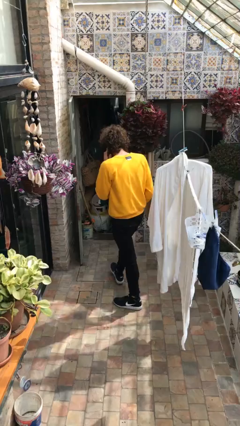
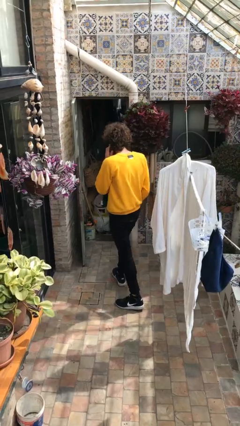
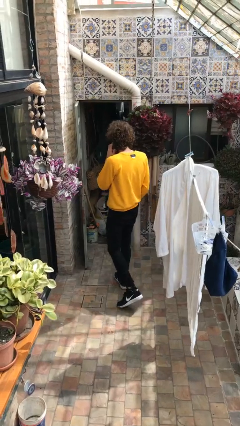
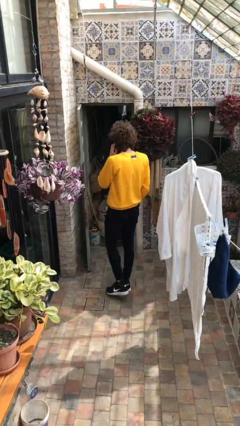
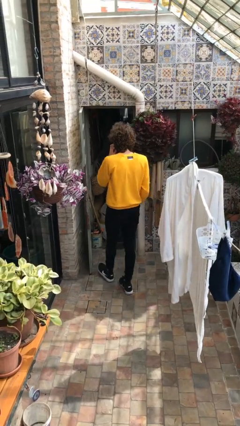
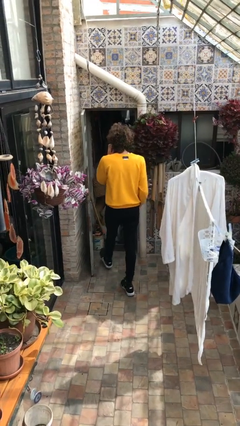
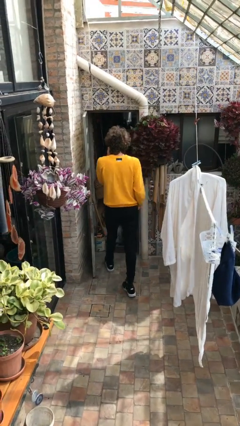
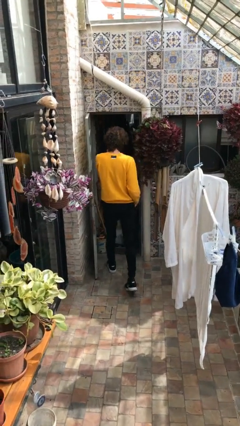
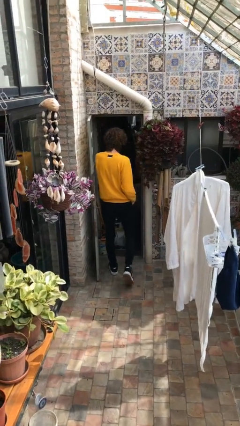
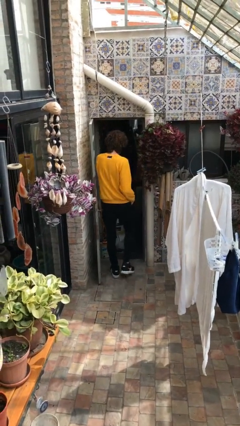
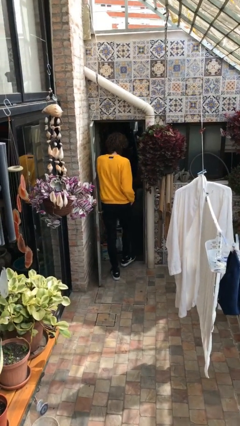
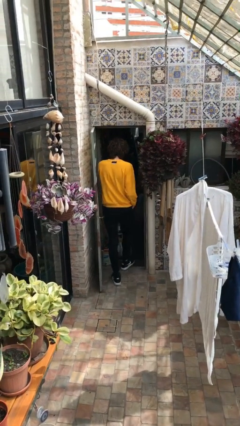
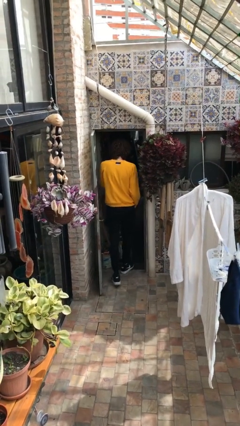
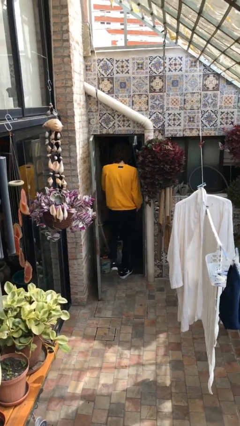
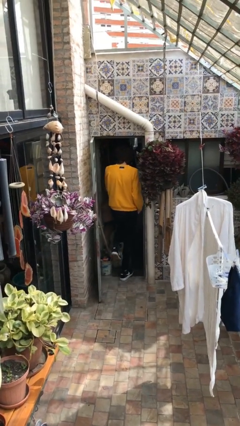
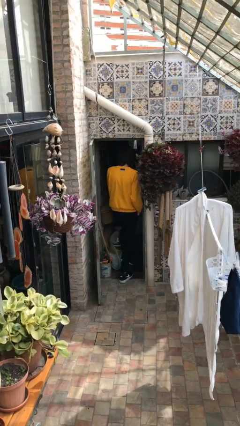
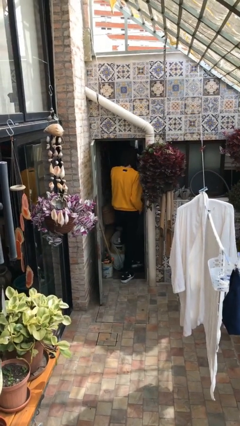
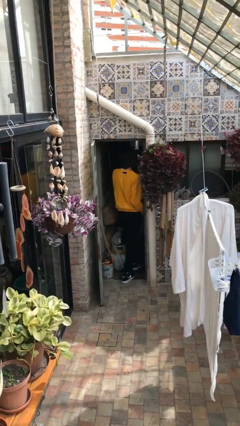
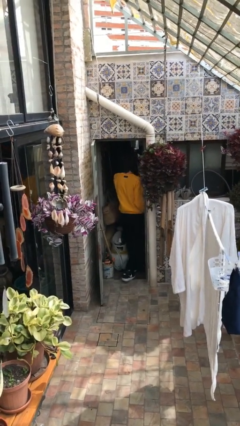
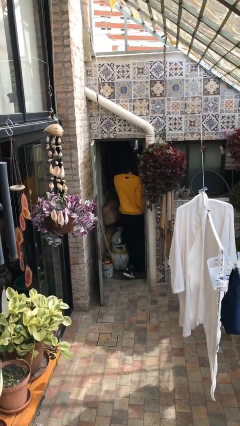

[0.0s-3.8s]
person exits scene through structure

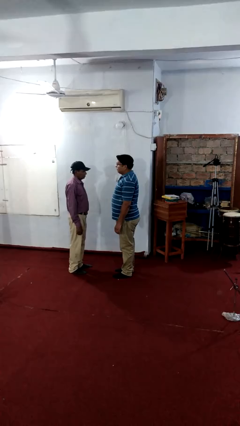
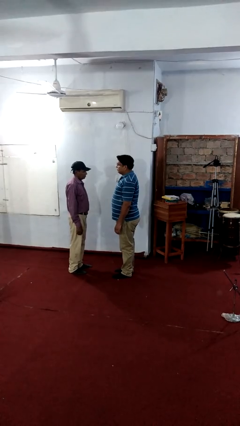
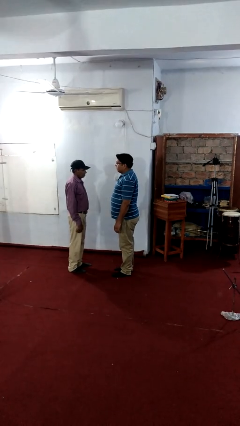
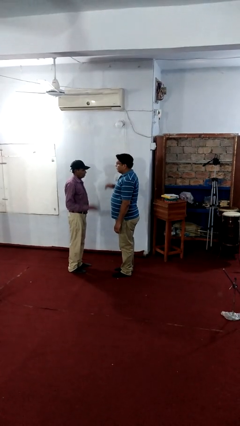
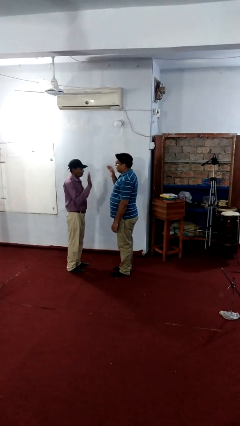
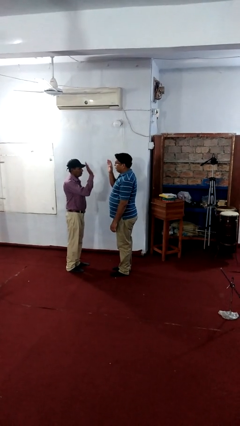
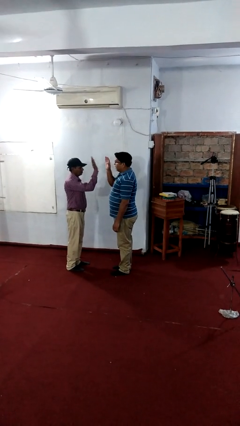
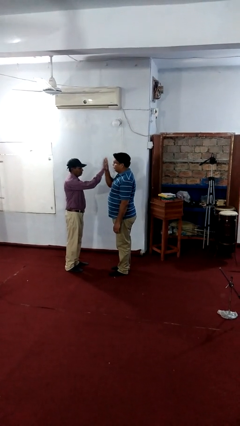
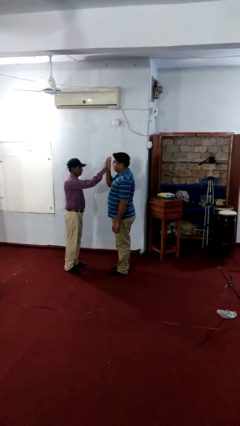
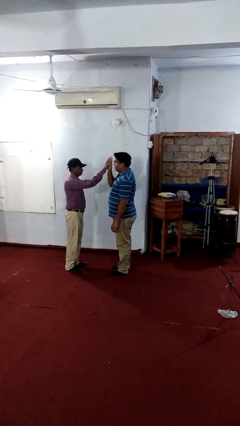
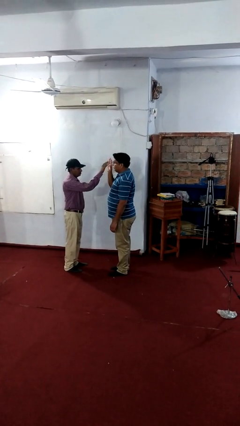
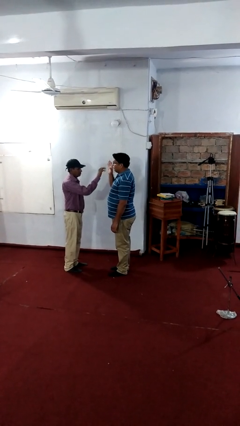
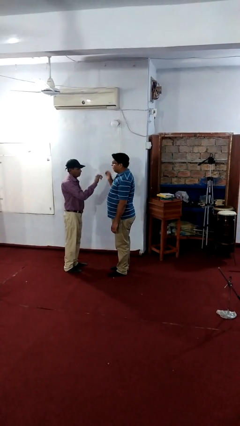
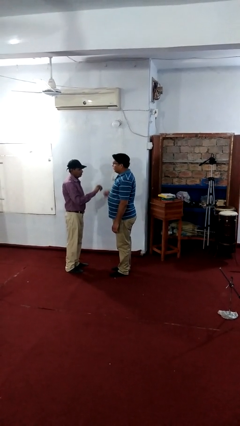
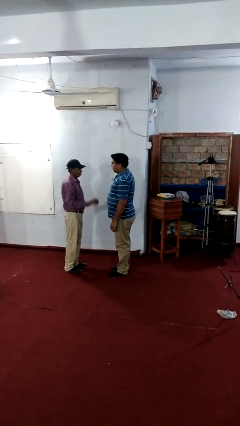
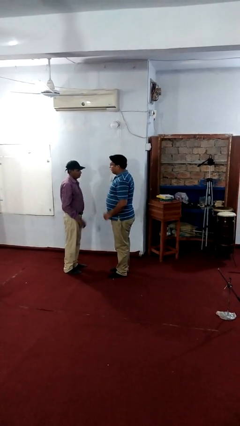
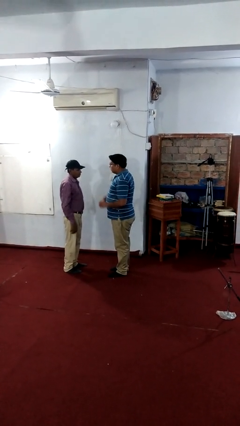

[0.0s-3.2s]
person highfives hand

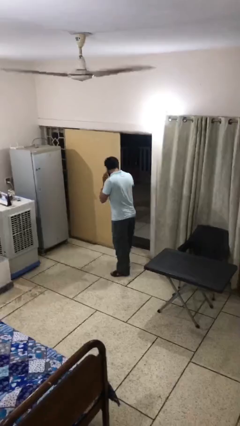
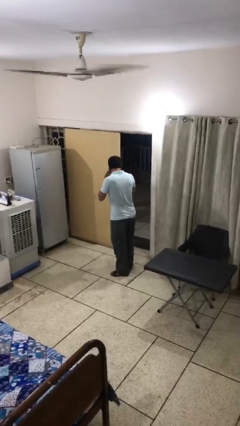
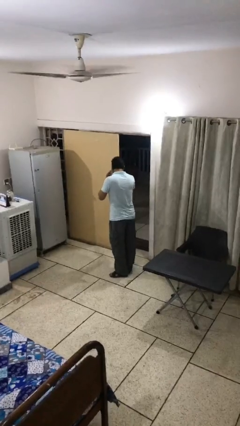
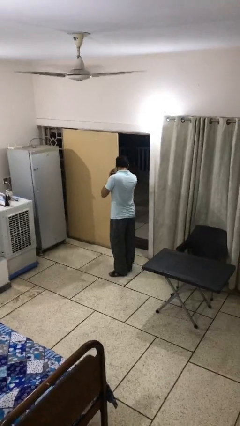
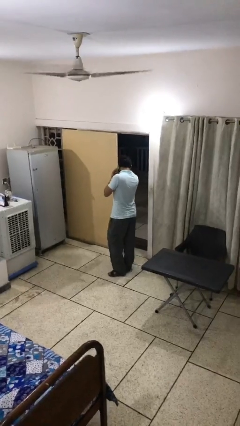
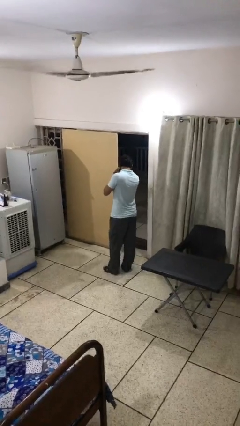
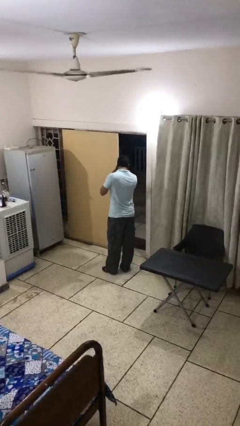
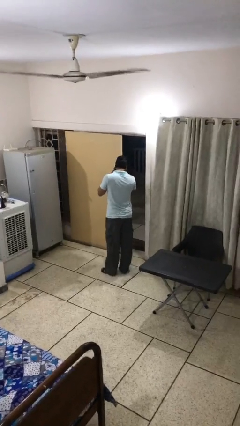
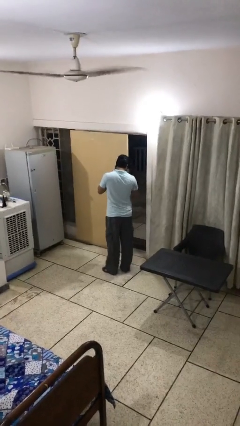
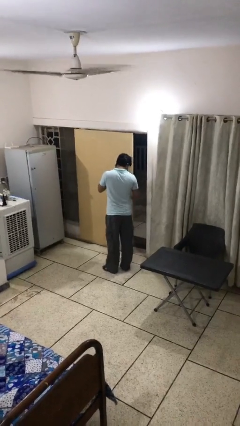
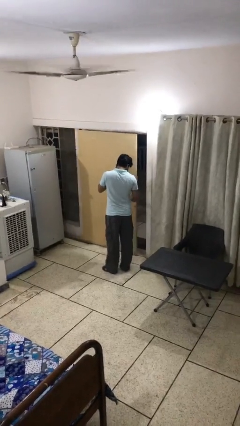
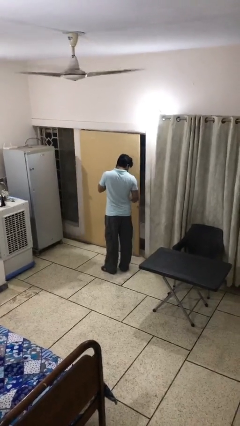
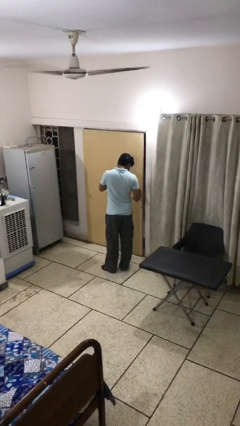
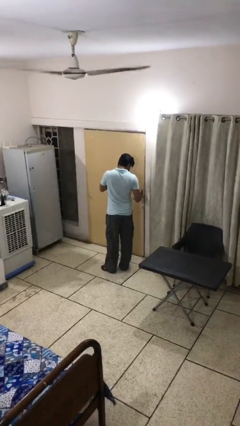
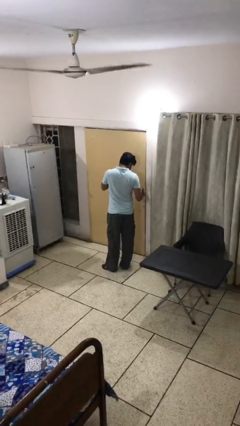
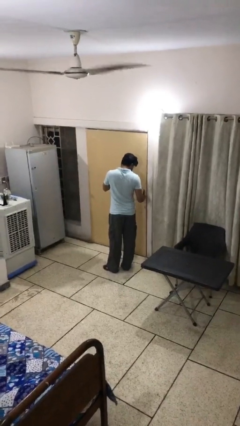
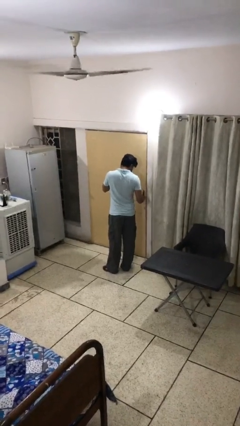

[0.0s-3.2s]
person closes facility door

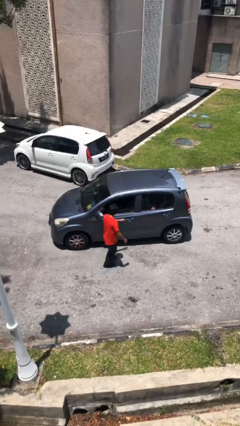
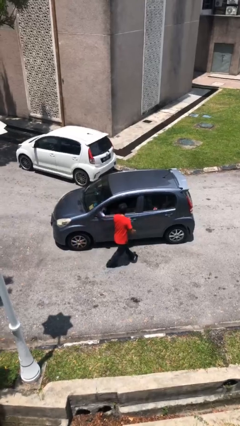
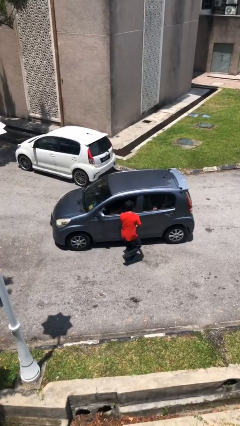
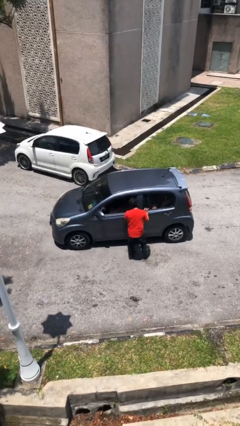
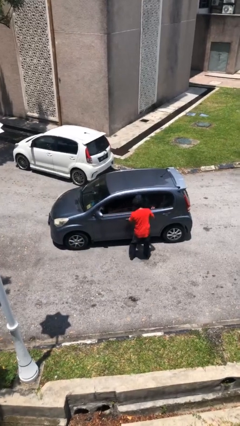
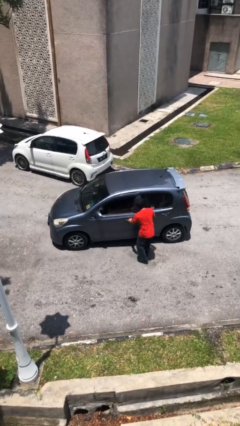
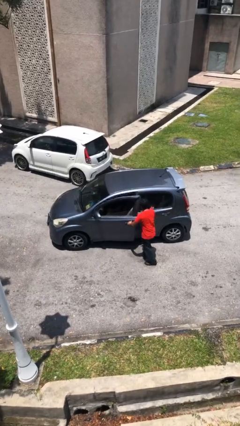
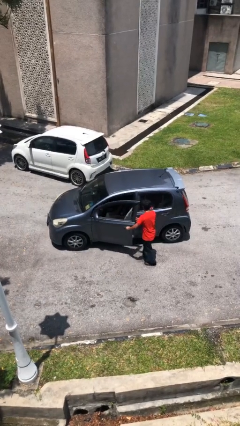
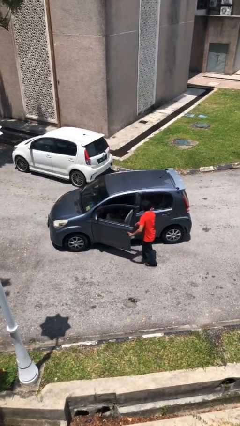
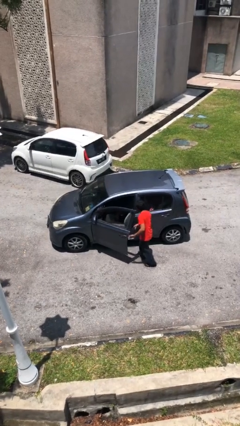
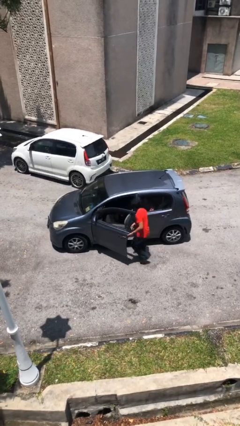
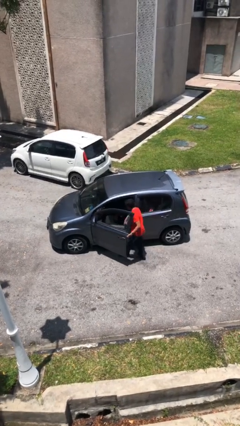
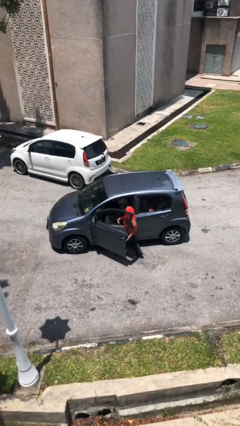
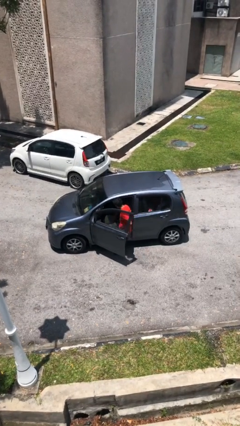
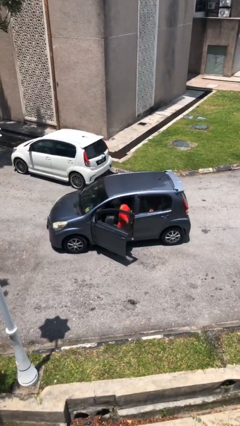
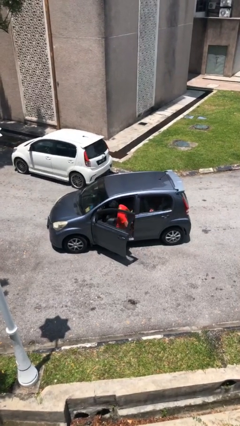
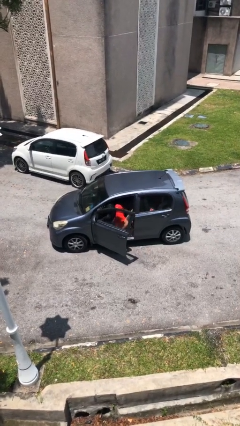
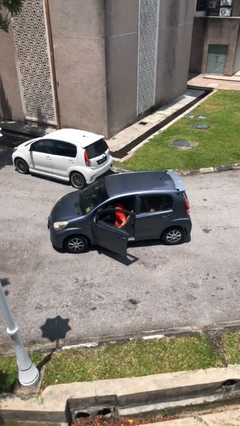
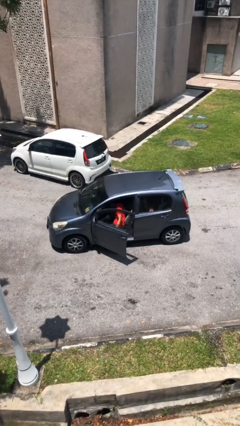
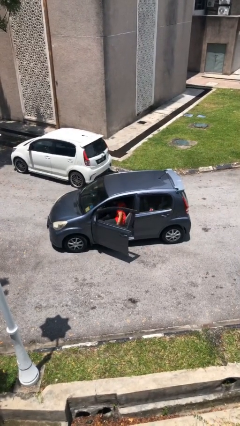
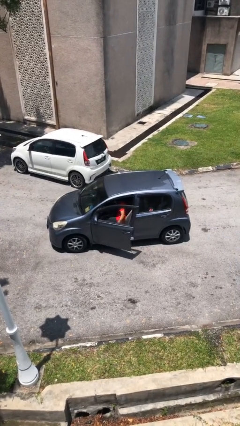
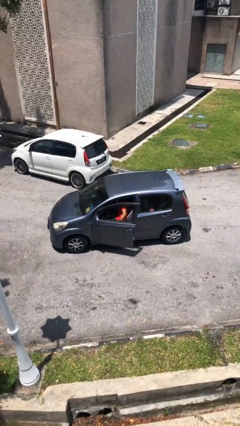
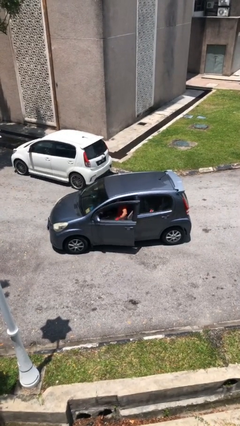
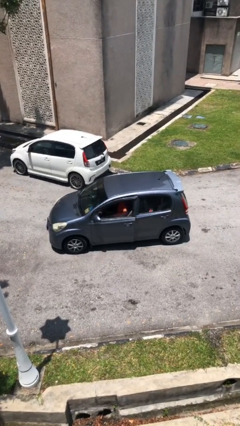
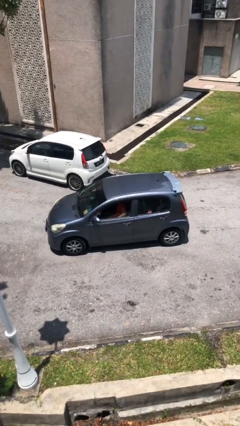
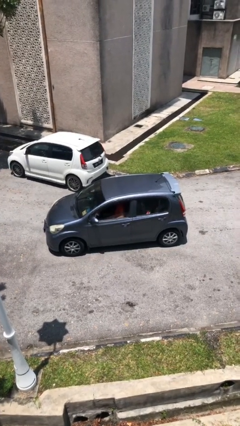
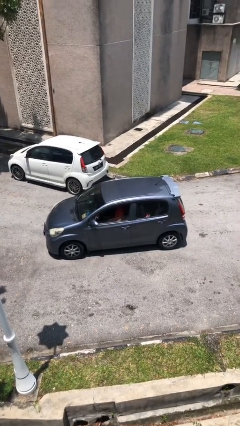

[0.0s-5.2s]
car picks up person

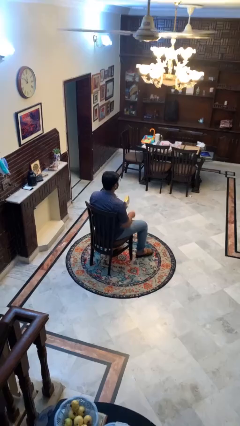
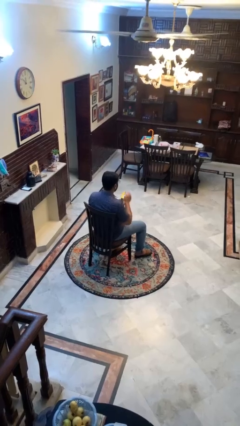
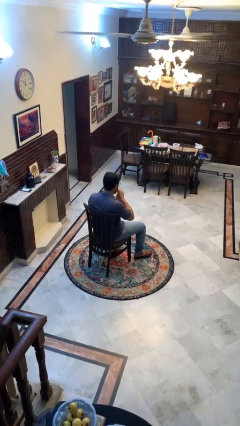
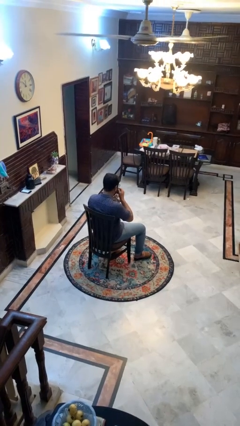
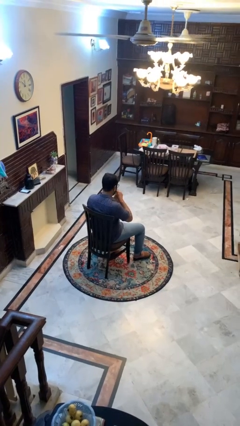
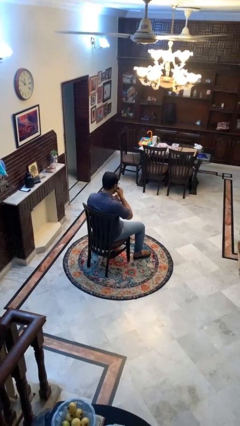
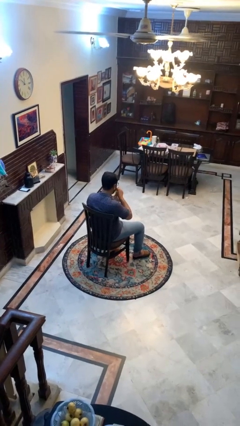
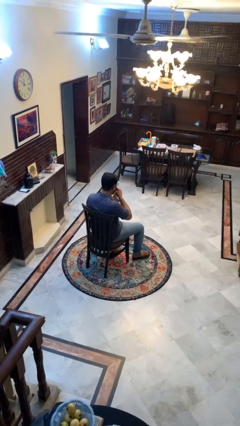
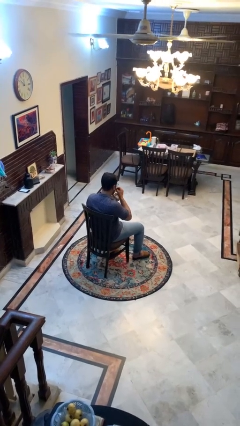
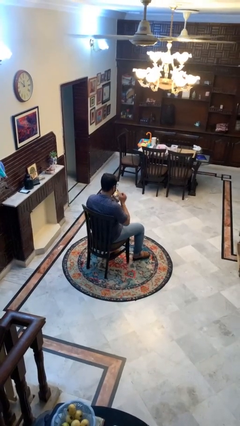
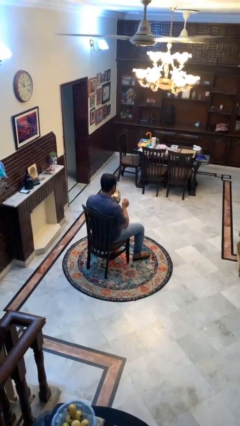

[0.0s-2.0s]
person eats snack from bag
